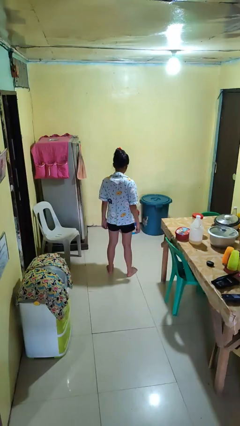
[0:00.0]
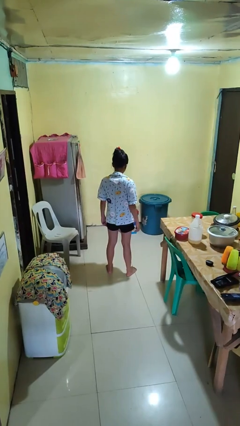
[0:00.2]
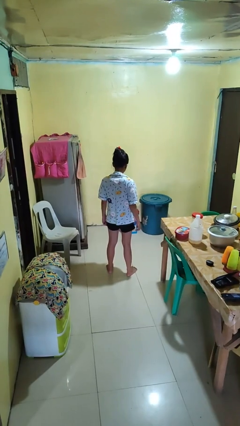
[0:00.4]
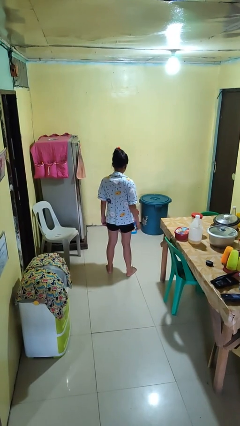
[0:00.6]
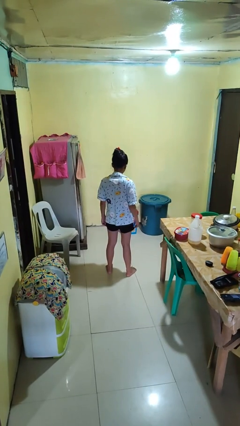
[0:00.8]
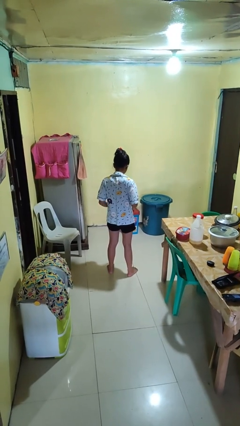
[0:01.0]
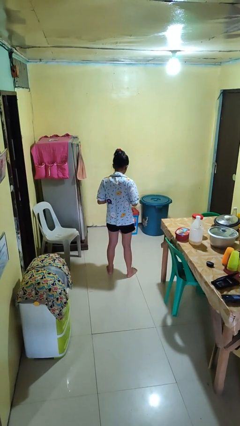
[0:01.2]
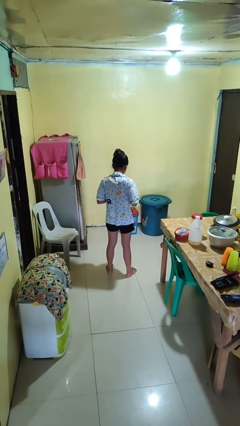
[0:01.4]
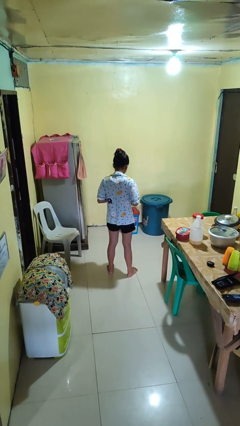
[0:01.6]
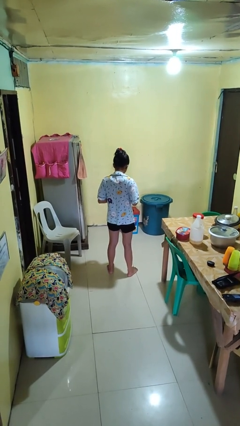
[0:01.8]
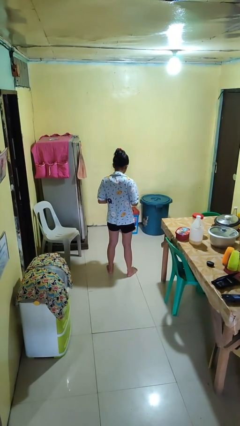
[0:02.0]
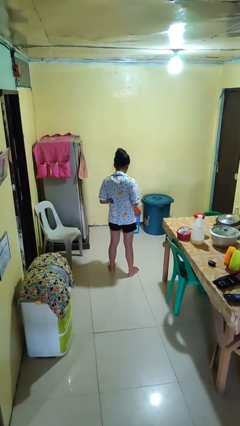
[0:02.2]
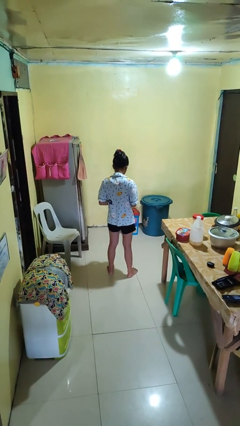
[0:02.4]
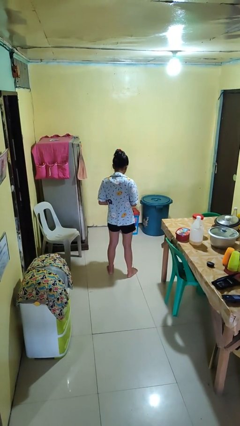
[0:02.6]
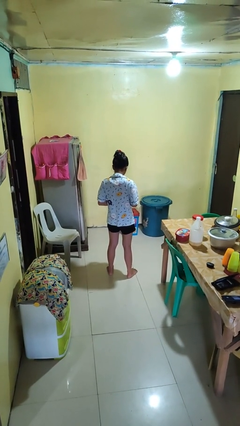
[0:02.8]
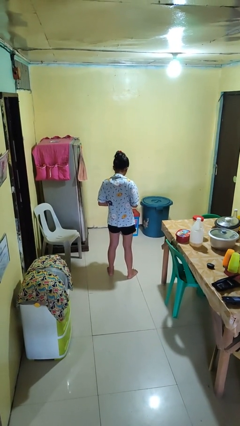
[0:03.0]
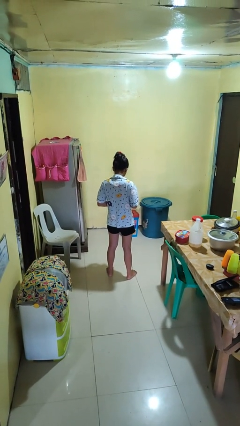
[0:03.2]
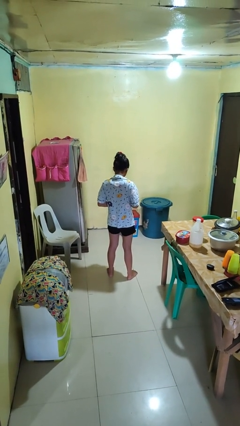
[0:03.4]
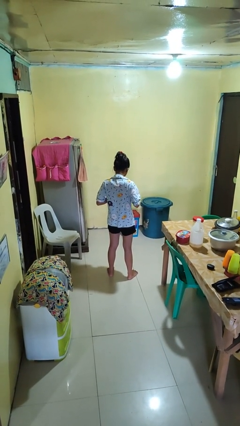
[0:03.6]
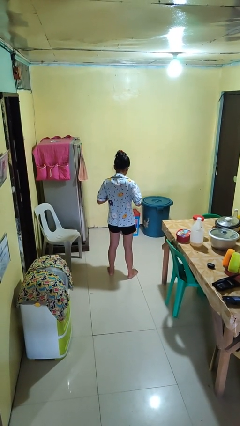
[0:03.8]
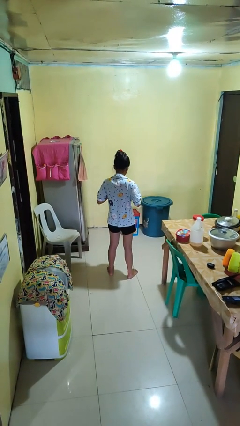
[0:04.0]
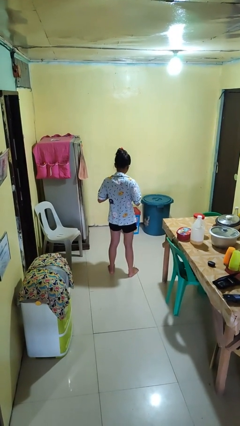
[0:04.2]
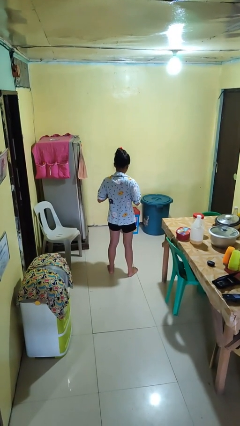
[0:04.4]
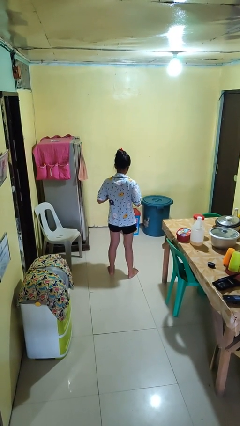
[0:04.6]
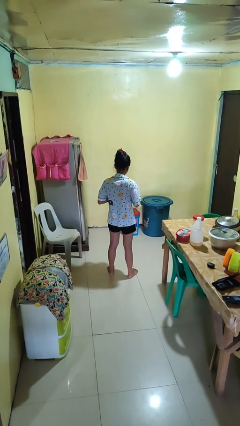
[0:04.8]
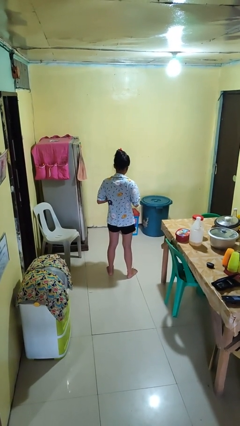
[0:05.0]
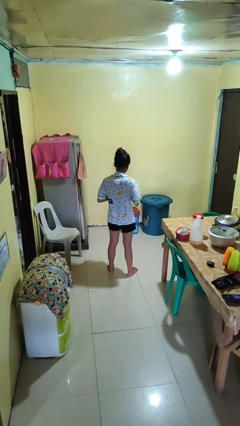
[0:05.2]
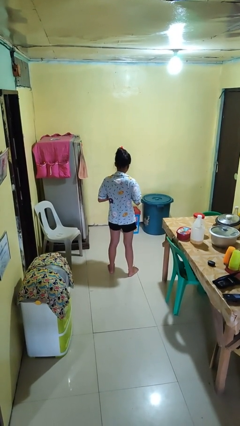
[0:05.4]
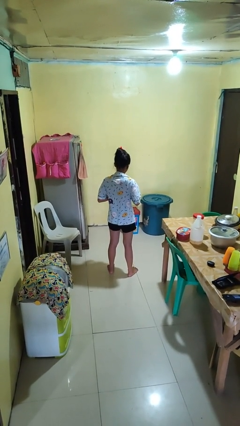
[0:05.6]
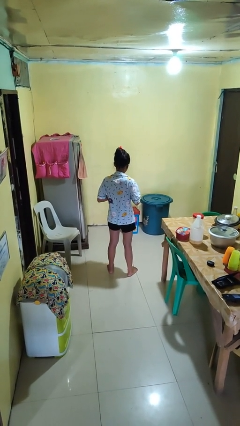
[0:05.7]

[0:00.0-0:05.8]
person buttons shirt

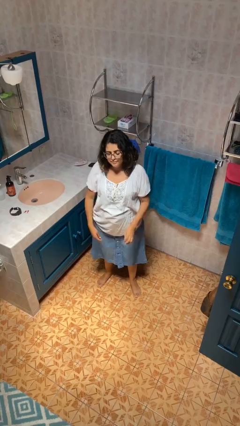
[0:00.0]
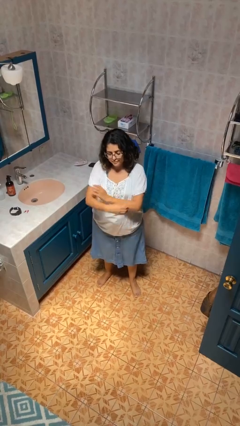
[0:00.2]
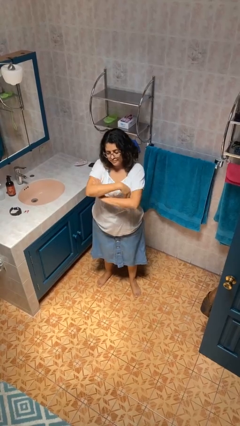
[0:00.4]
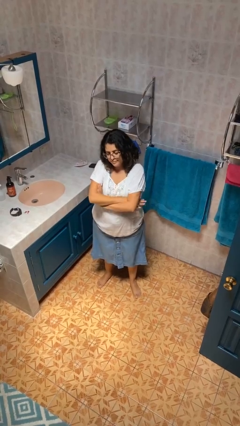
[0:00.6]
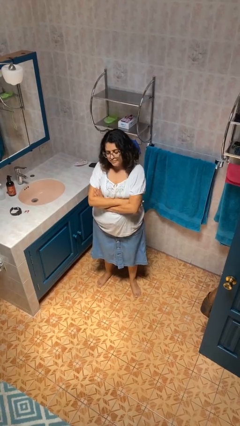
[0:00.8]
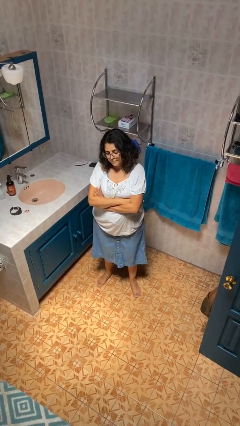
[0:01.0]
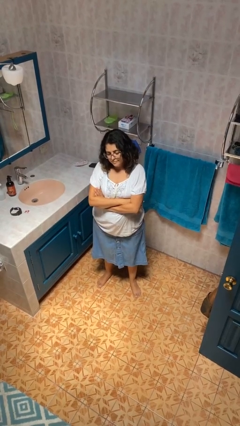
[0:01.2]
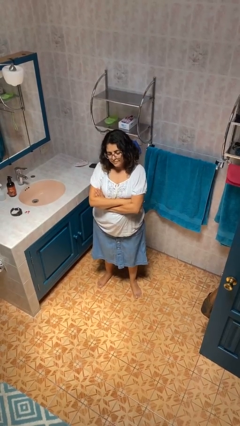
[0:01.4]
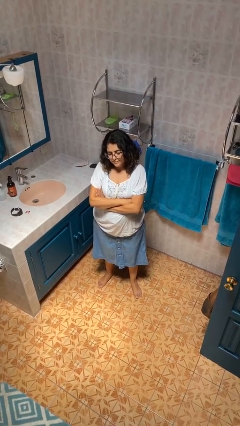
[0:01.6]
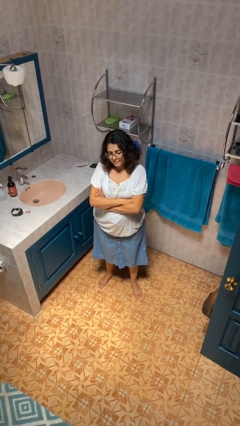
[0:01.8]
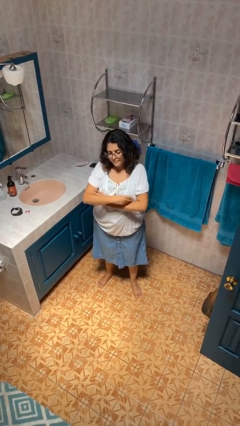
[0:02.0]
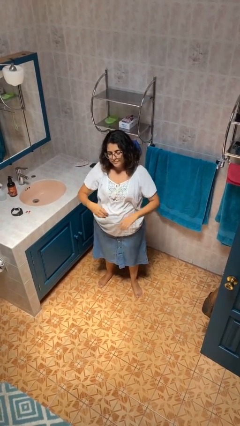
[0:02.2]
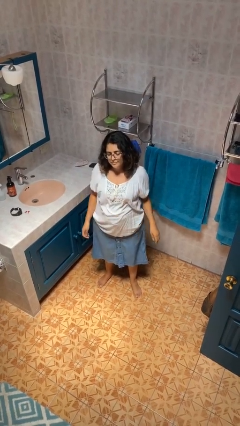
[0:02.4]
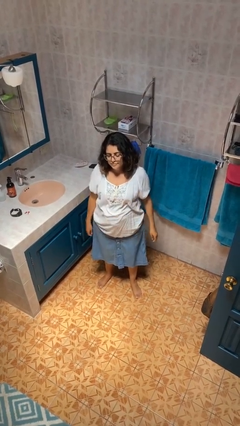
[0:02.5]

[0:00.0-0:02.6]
person crosses arms

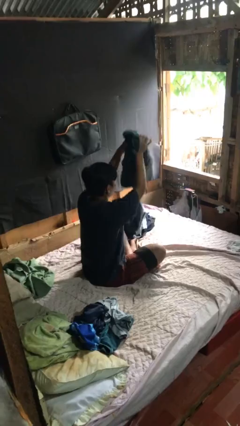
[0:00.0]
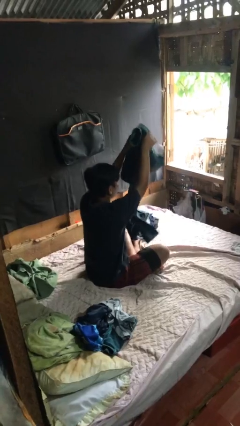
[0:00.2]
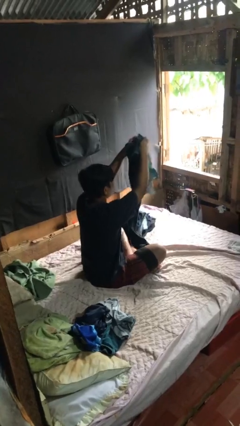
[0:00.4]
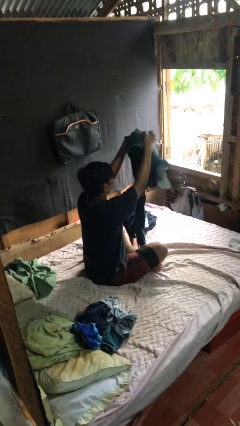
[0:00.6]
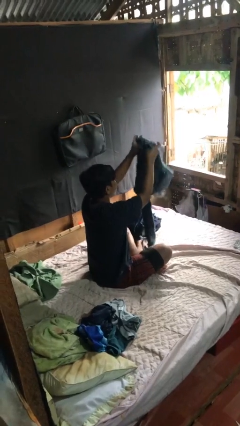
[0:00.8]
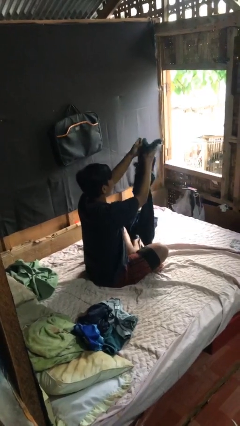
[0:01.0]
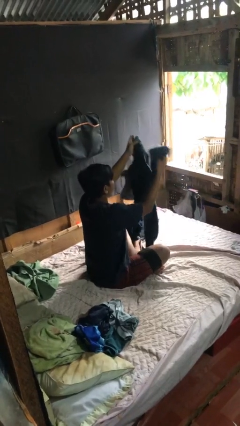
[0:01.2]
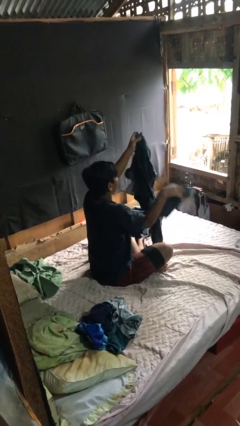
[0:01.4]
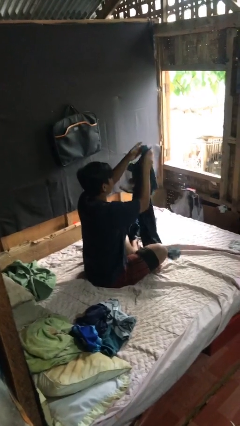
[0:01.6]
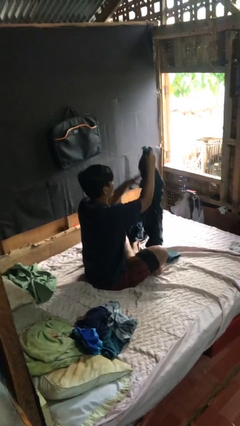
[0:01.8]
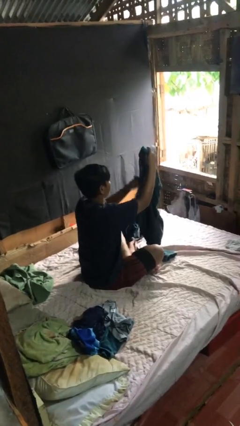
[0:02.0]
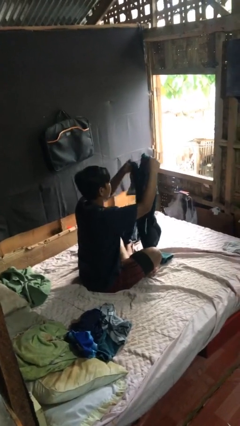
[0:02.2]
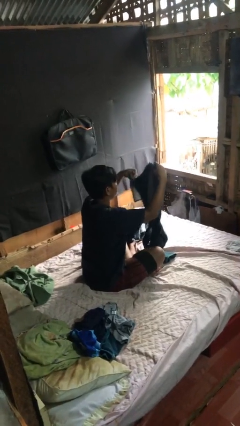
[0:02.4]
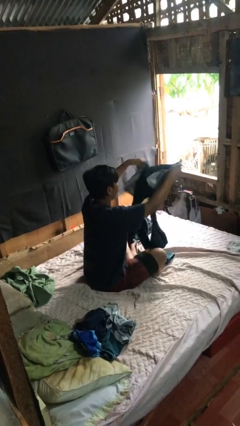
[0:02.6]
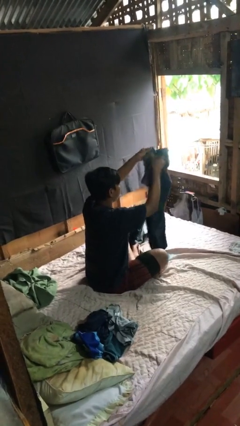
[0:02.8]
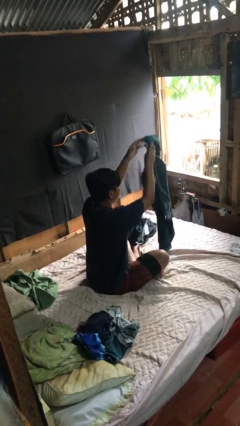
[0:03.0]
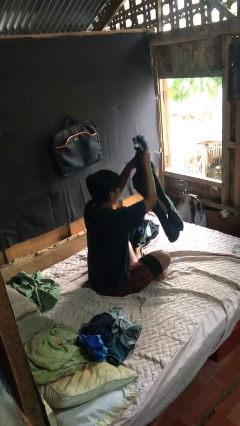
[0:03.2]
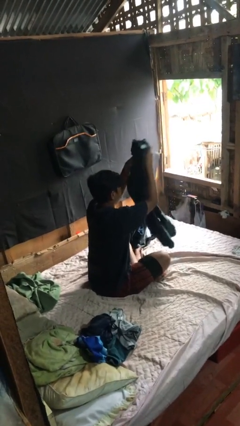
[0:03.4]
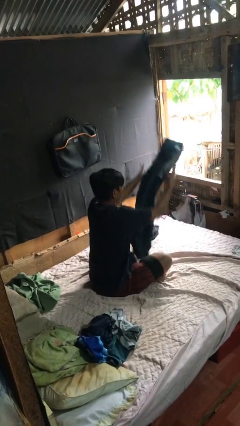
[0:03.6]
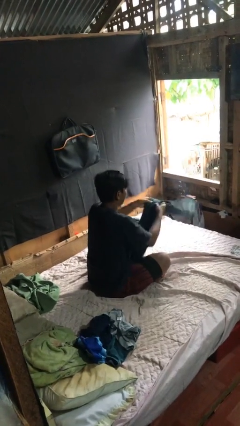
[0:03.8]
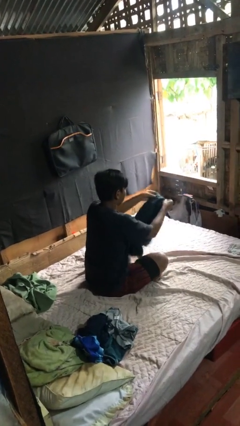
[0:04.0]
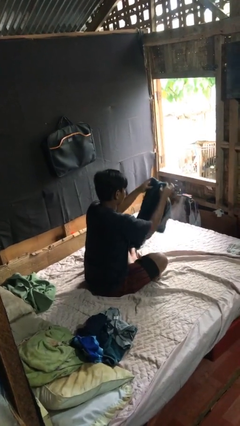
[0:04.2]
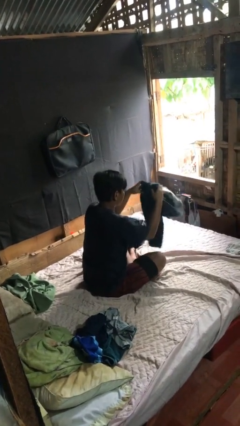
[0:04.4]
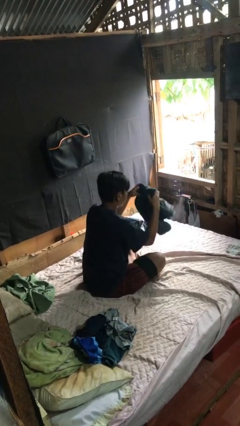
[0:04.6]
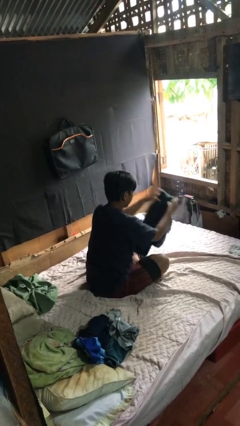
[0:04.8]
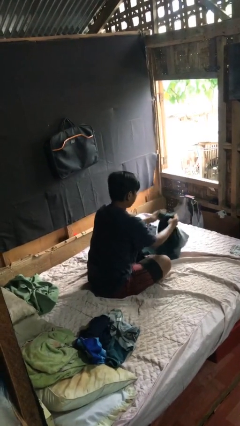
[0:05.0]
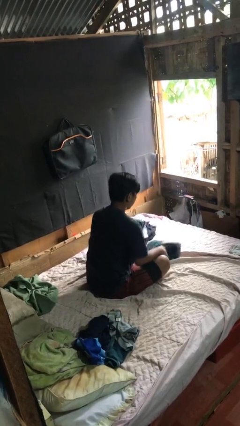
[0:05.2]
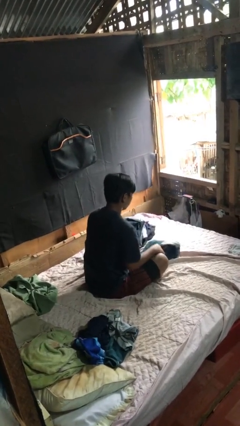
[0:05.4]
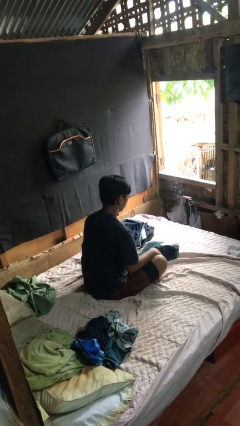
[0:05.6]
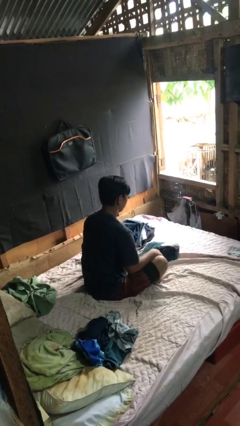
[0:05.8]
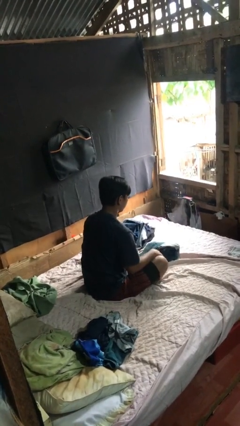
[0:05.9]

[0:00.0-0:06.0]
person folds pants

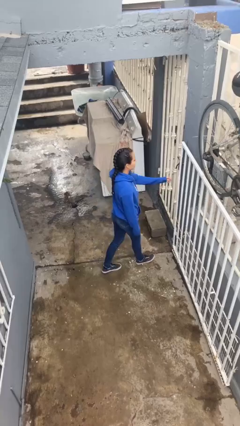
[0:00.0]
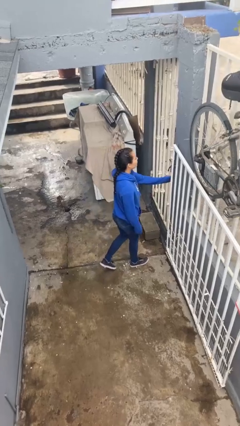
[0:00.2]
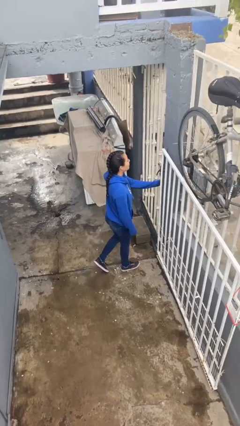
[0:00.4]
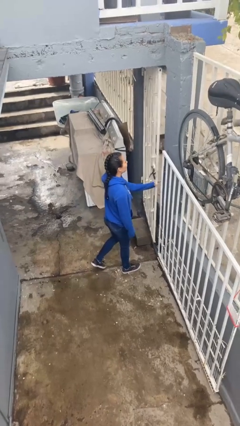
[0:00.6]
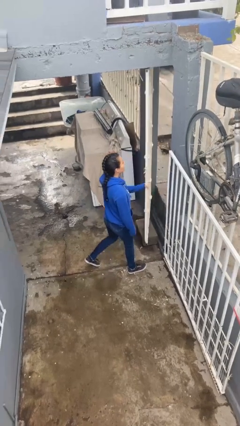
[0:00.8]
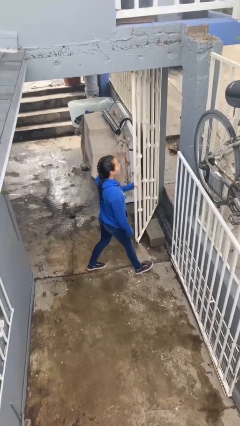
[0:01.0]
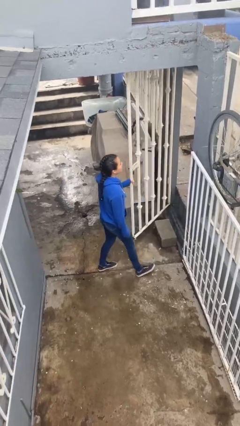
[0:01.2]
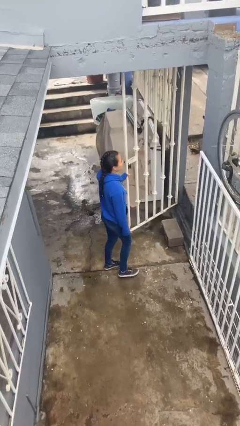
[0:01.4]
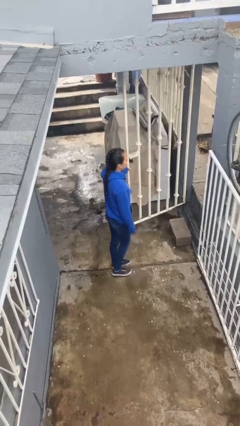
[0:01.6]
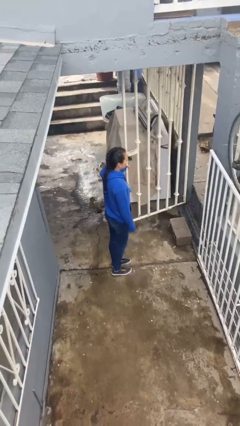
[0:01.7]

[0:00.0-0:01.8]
person opens facility door

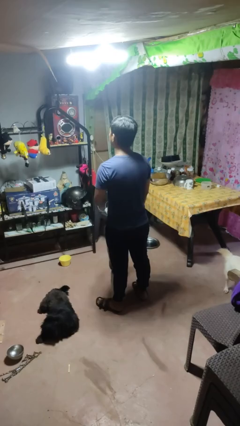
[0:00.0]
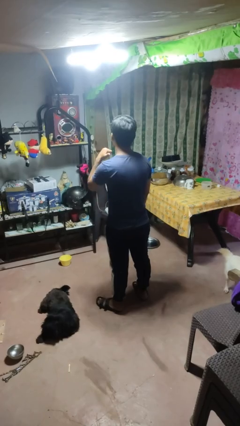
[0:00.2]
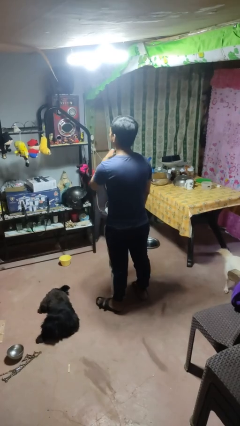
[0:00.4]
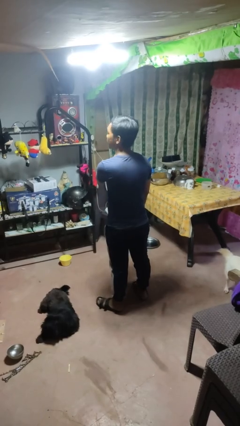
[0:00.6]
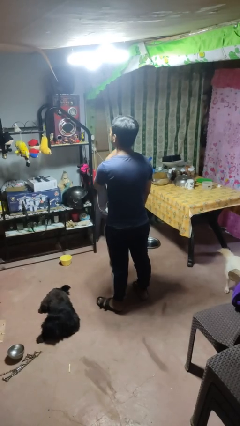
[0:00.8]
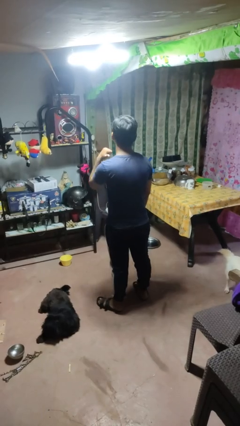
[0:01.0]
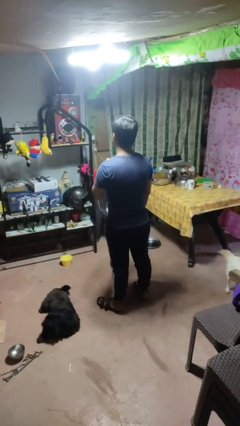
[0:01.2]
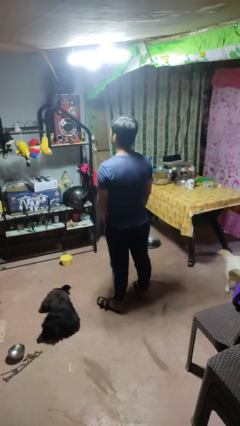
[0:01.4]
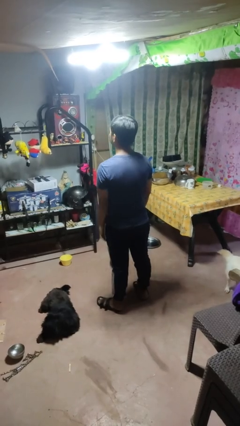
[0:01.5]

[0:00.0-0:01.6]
person gestures cut

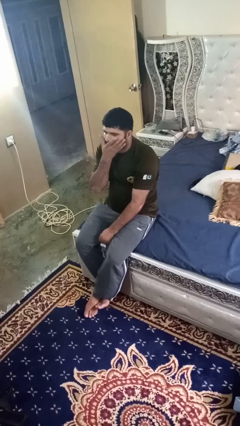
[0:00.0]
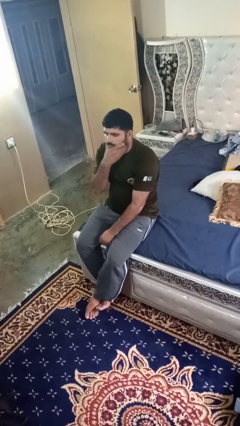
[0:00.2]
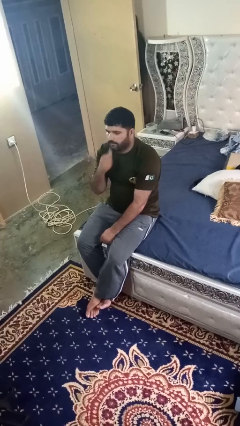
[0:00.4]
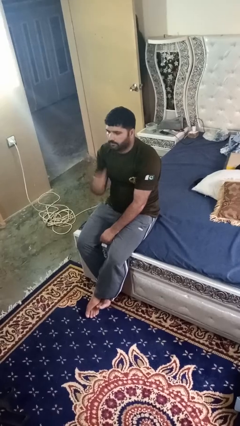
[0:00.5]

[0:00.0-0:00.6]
person strokes chin
